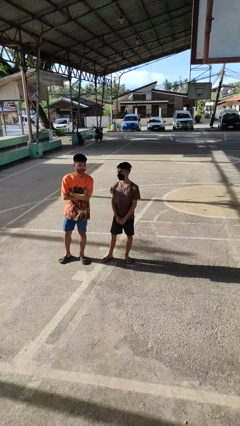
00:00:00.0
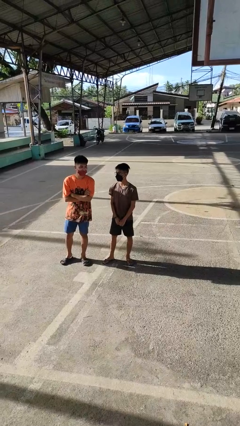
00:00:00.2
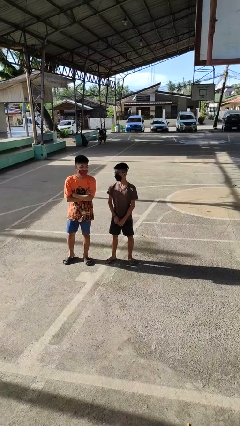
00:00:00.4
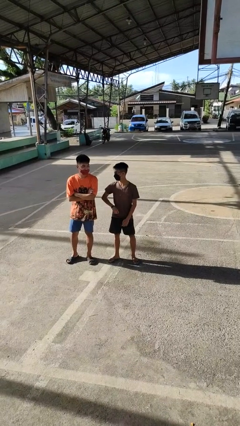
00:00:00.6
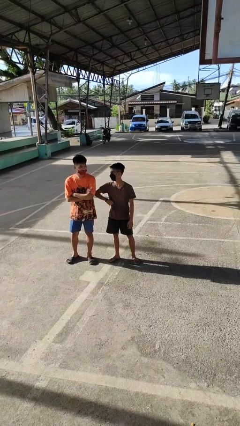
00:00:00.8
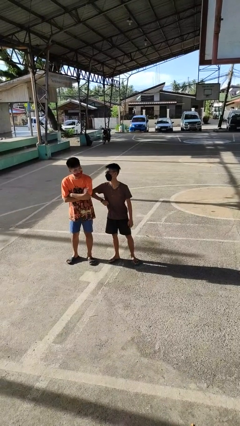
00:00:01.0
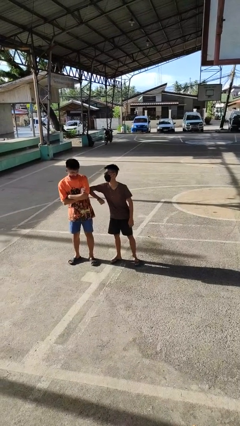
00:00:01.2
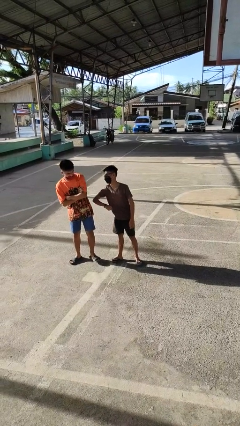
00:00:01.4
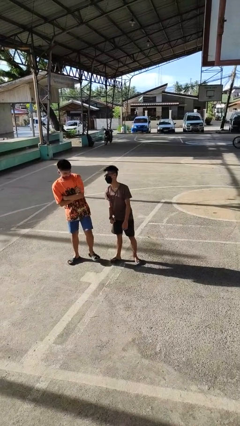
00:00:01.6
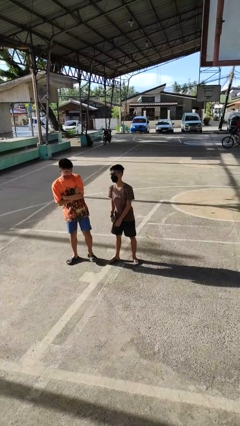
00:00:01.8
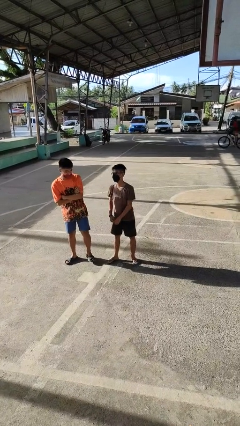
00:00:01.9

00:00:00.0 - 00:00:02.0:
person nudges person with elbow

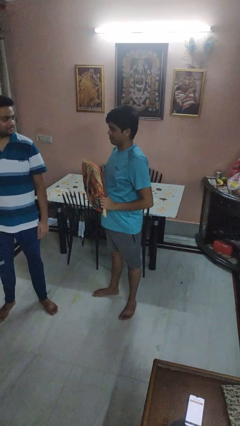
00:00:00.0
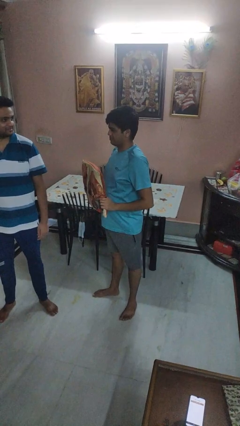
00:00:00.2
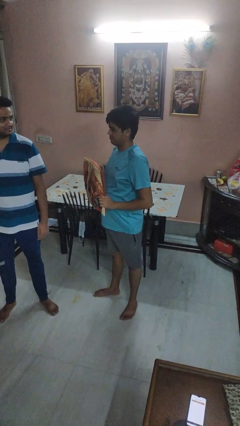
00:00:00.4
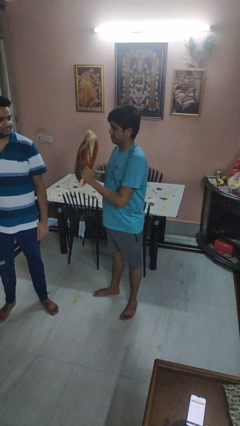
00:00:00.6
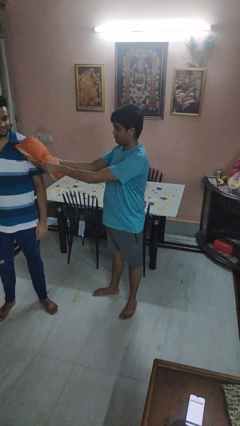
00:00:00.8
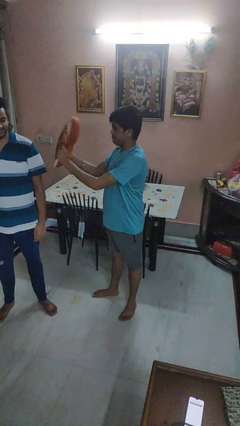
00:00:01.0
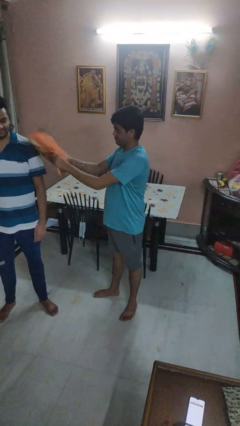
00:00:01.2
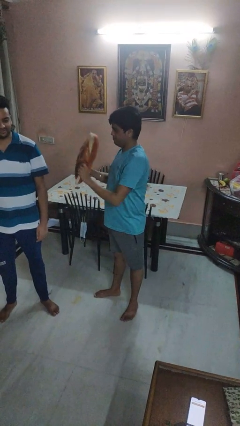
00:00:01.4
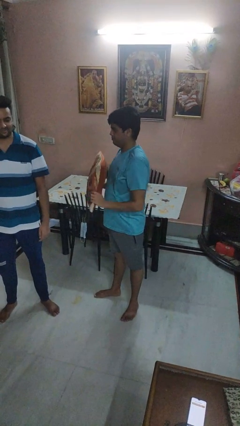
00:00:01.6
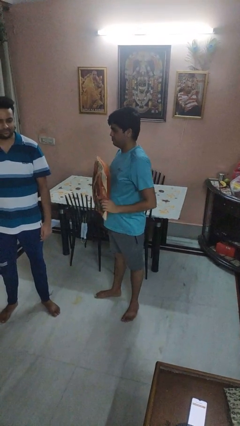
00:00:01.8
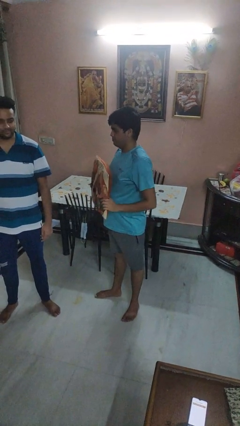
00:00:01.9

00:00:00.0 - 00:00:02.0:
person hits person with pillow

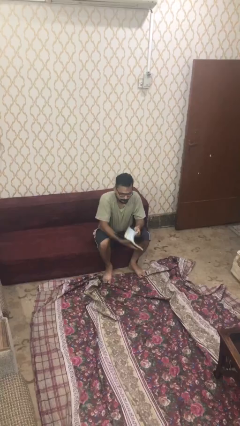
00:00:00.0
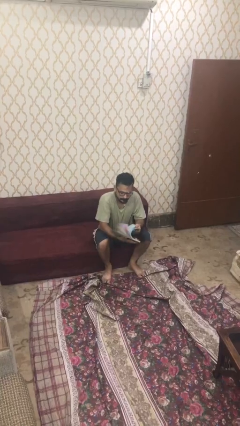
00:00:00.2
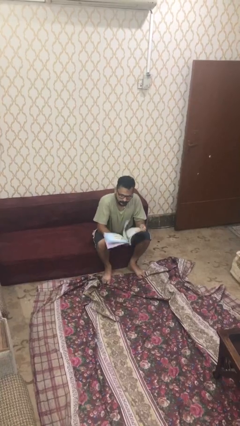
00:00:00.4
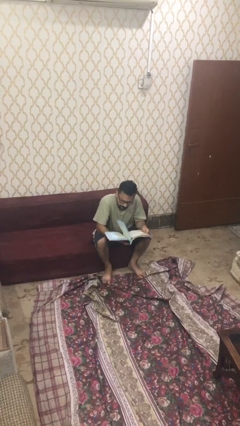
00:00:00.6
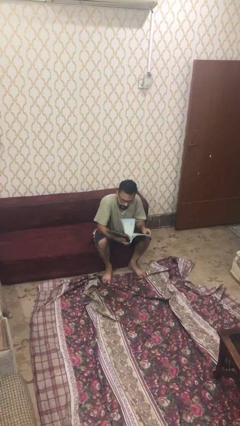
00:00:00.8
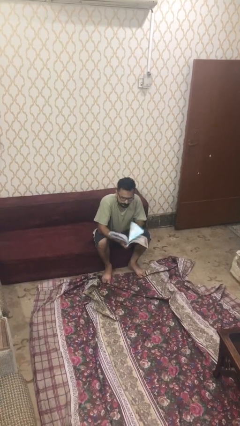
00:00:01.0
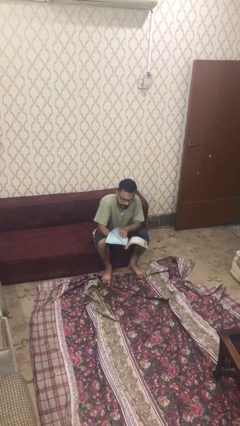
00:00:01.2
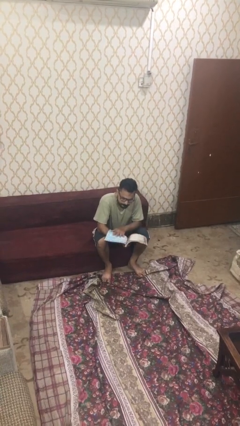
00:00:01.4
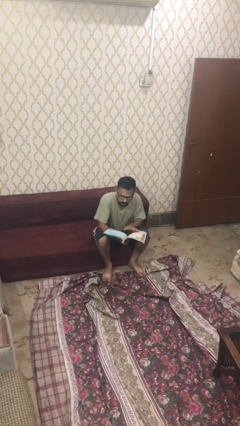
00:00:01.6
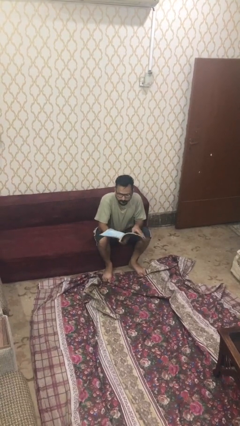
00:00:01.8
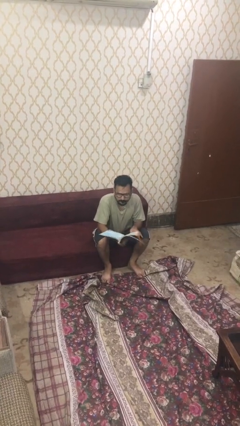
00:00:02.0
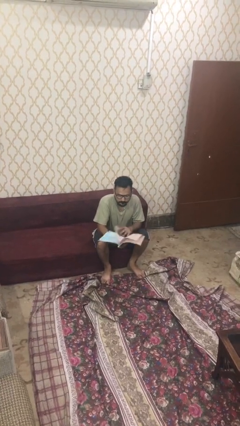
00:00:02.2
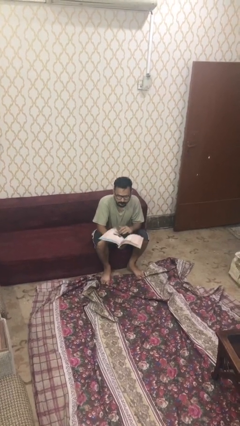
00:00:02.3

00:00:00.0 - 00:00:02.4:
person reads document

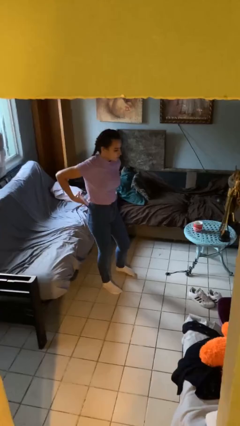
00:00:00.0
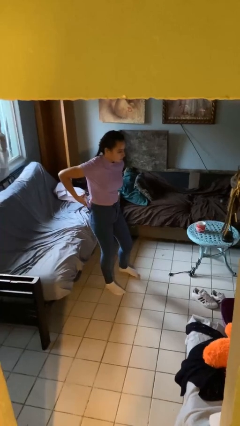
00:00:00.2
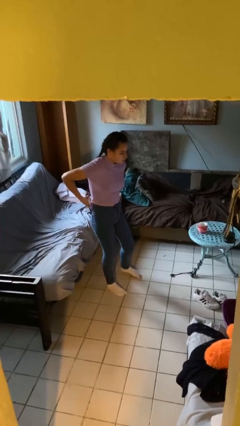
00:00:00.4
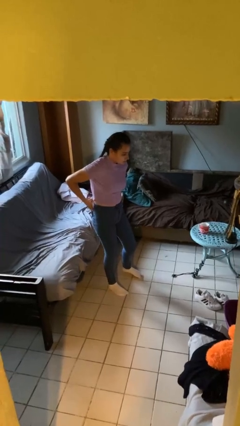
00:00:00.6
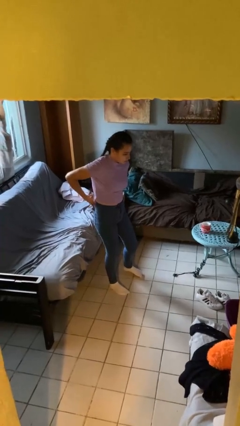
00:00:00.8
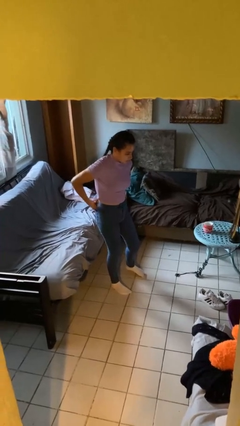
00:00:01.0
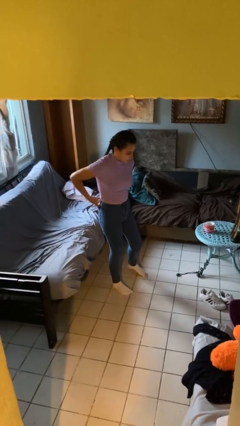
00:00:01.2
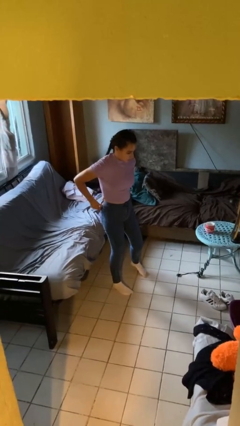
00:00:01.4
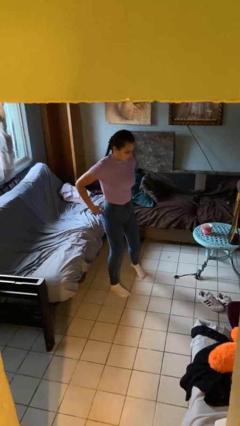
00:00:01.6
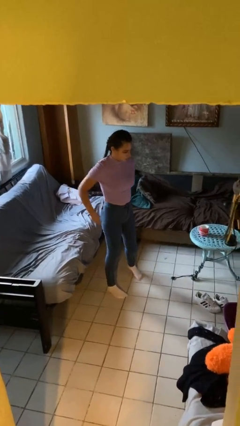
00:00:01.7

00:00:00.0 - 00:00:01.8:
person puts phone into pocket

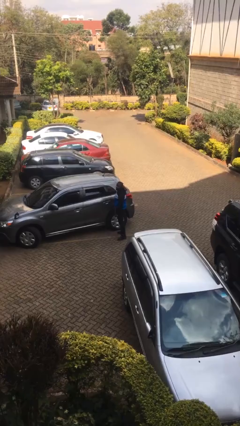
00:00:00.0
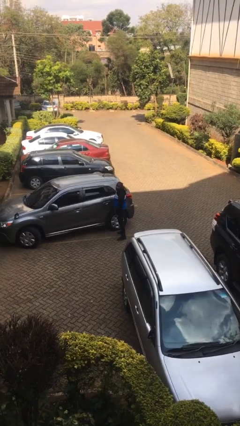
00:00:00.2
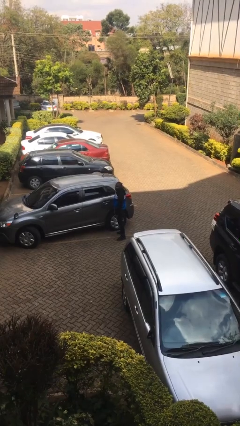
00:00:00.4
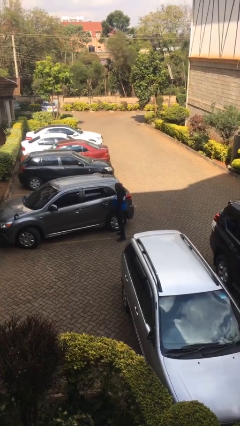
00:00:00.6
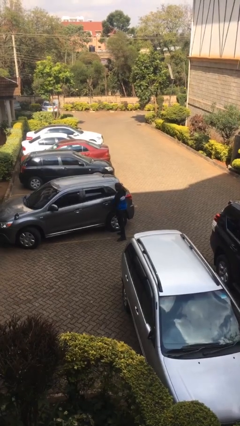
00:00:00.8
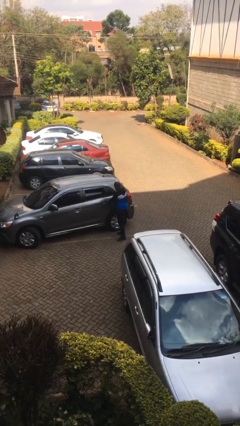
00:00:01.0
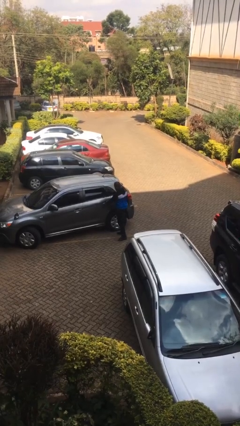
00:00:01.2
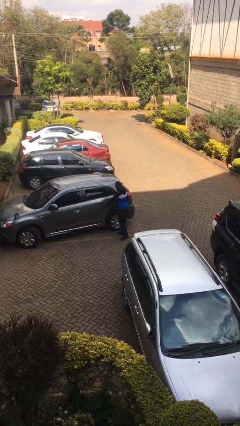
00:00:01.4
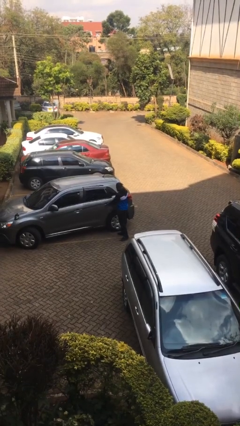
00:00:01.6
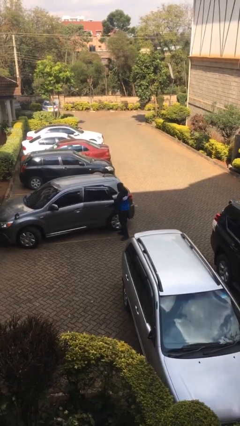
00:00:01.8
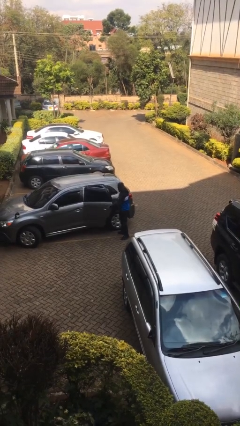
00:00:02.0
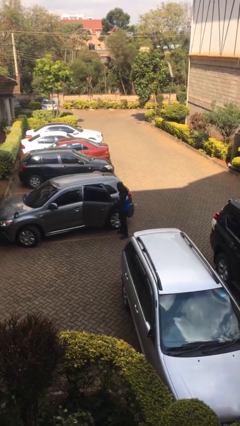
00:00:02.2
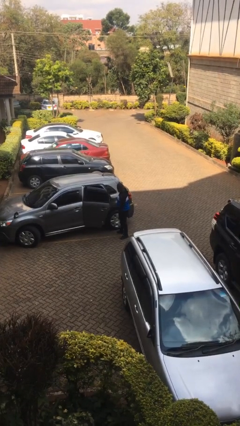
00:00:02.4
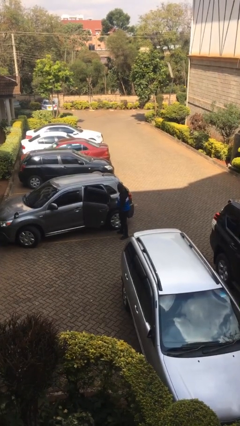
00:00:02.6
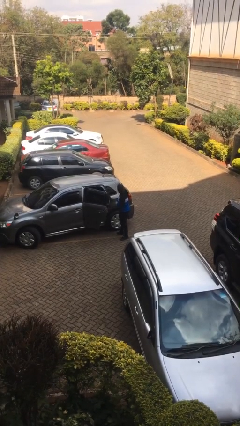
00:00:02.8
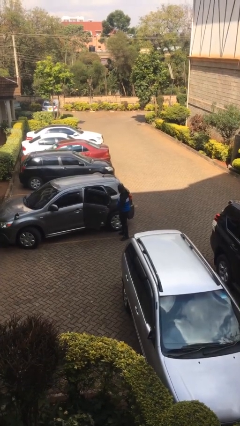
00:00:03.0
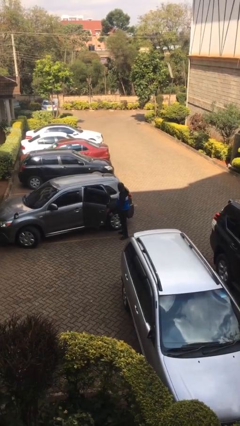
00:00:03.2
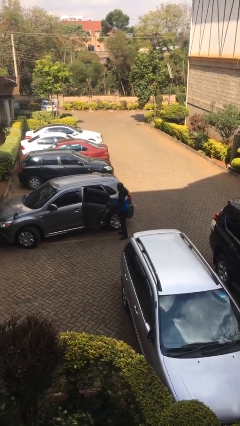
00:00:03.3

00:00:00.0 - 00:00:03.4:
person opens car door

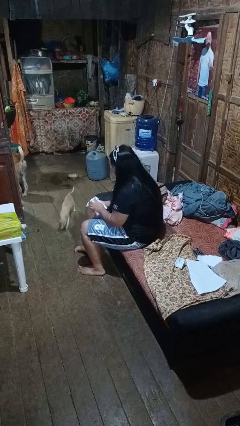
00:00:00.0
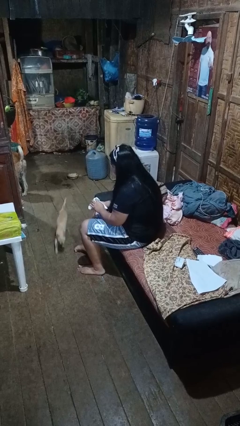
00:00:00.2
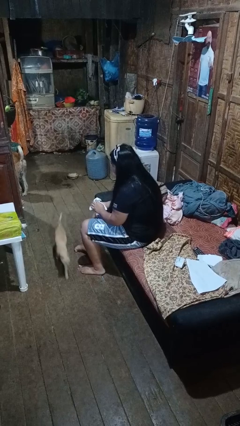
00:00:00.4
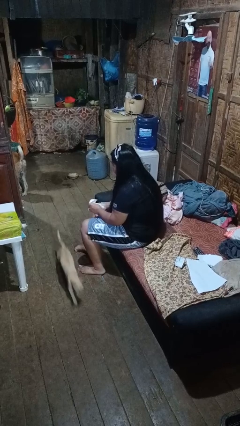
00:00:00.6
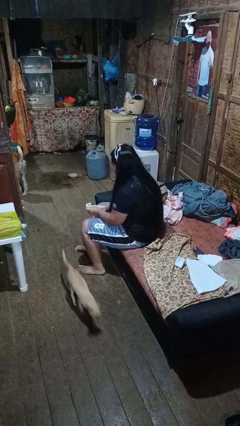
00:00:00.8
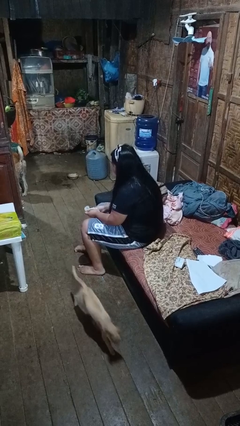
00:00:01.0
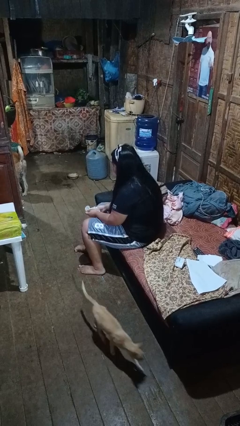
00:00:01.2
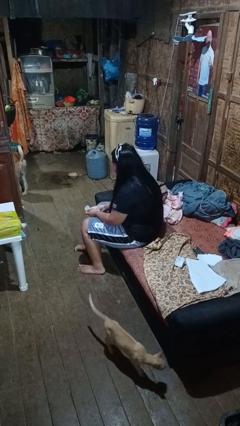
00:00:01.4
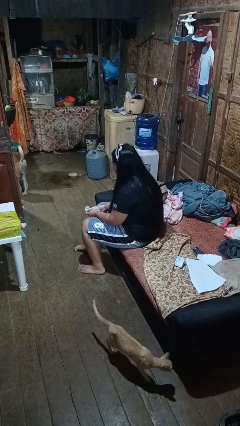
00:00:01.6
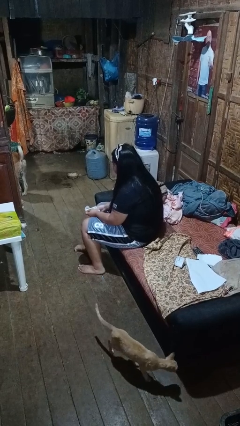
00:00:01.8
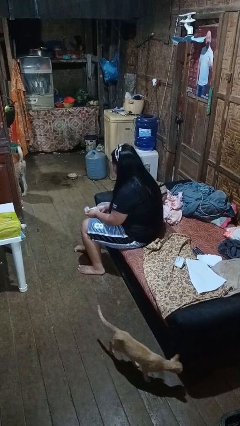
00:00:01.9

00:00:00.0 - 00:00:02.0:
person crumples paper

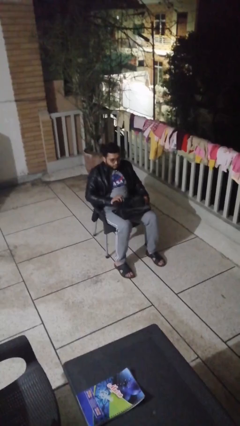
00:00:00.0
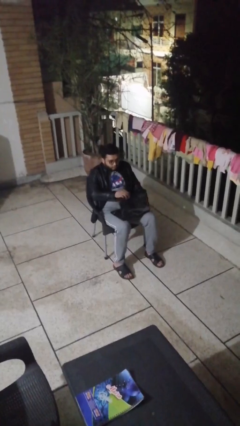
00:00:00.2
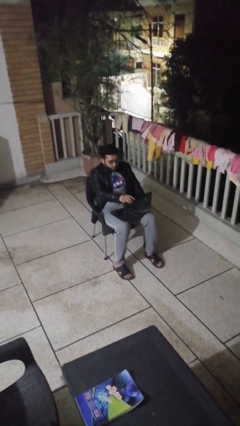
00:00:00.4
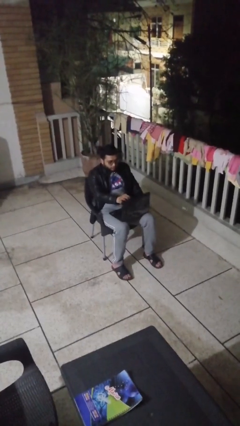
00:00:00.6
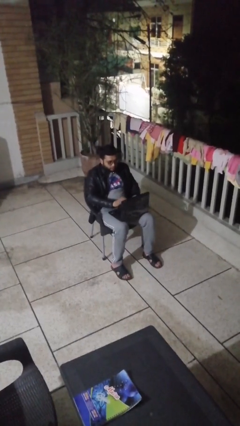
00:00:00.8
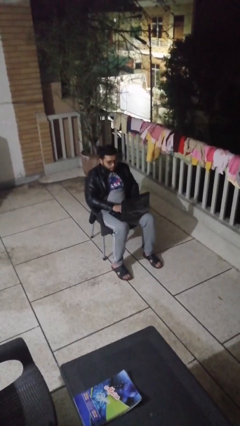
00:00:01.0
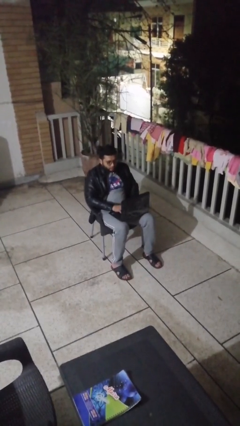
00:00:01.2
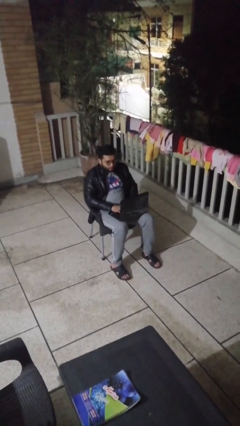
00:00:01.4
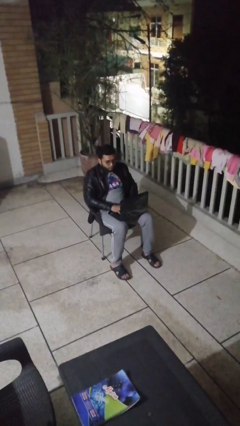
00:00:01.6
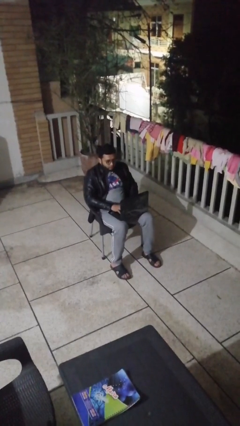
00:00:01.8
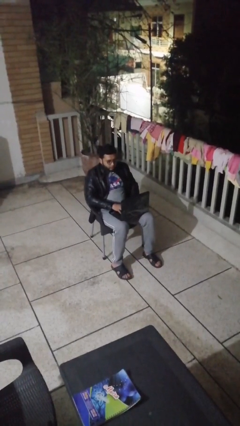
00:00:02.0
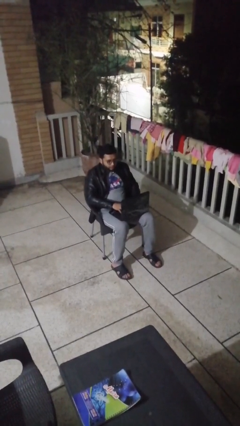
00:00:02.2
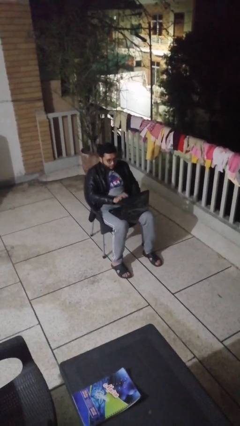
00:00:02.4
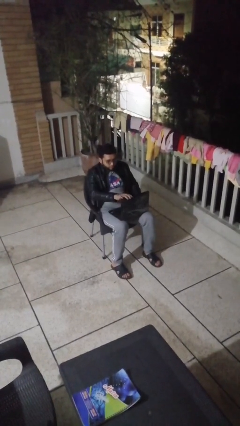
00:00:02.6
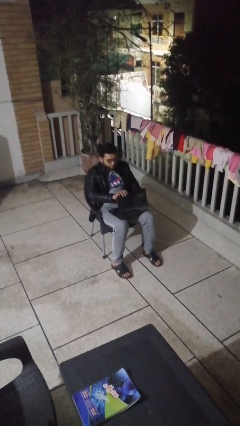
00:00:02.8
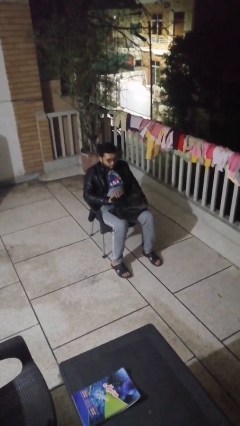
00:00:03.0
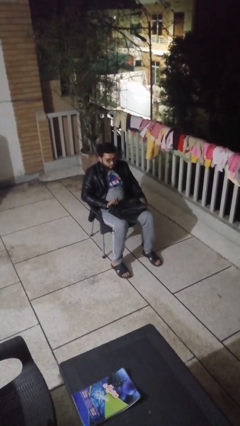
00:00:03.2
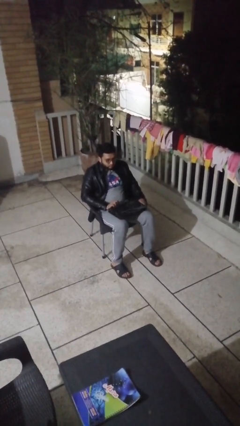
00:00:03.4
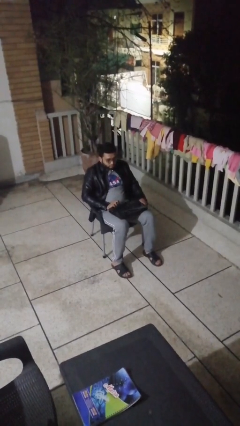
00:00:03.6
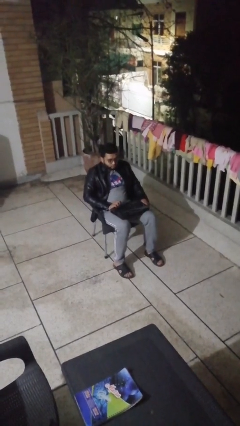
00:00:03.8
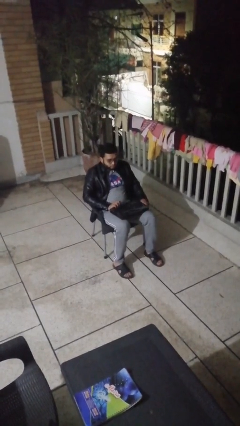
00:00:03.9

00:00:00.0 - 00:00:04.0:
person interacts with laptop
